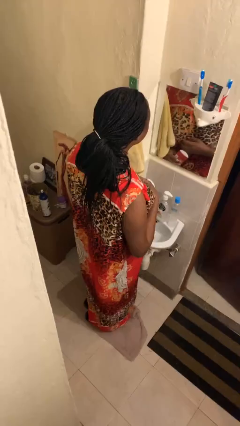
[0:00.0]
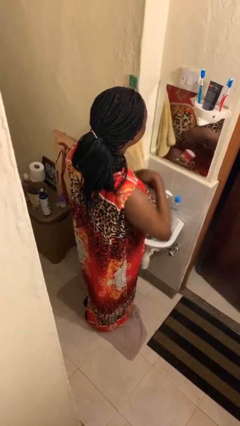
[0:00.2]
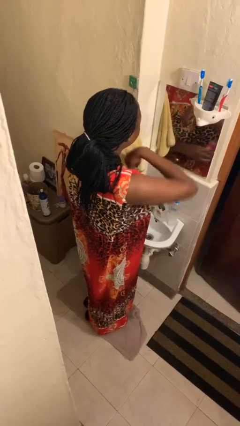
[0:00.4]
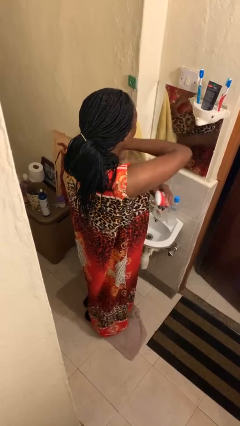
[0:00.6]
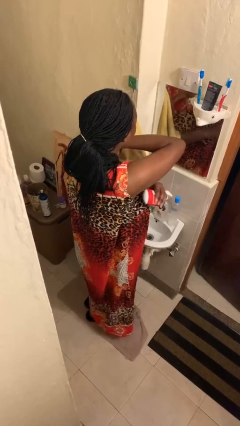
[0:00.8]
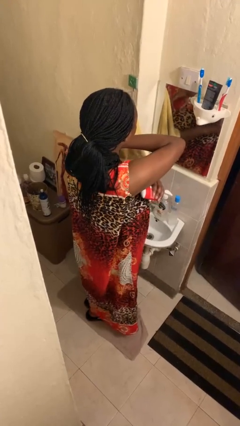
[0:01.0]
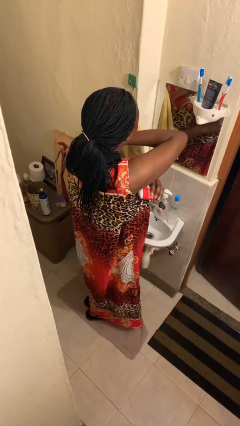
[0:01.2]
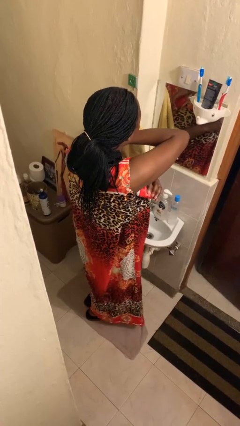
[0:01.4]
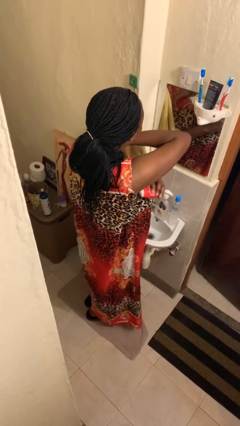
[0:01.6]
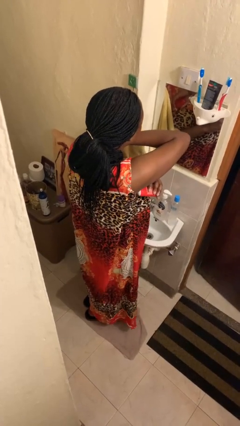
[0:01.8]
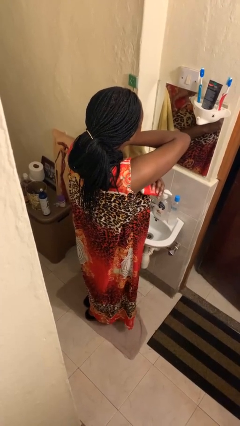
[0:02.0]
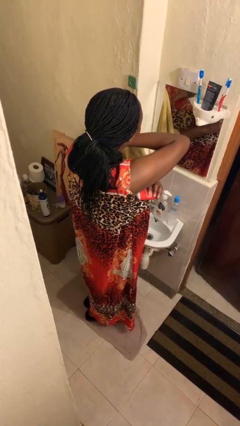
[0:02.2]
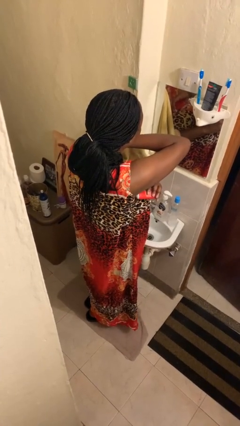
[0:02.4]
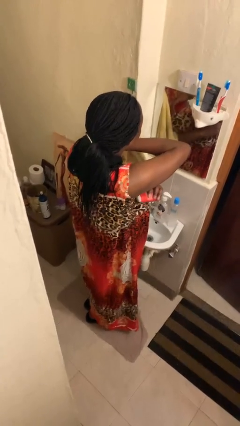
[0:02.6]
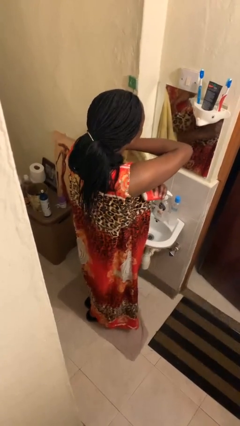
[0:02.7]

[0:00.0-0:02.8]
person applies deodorant

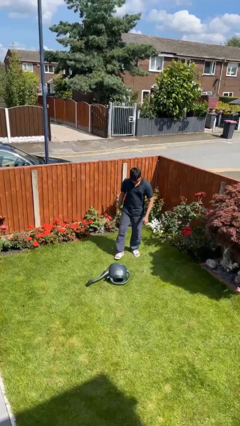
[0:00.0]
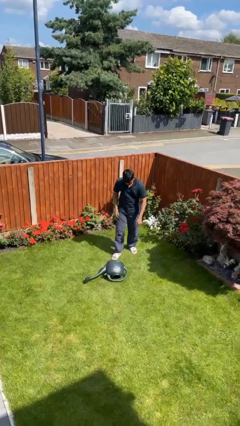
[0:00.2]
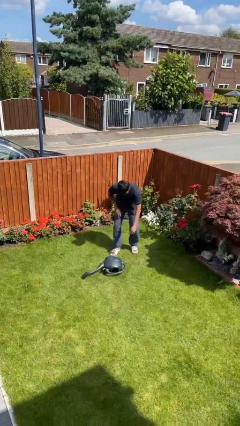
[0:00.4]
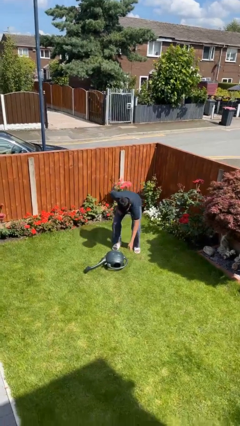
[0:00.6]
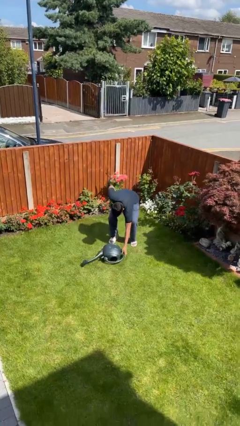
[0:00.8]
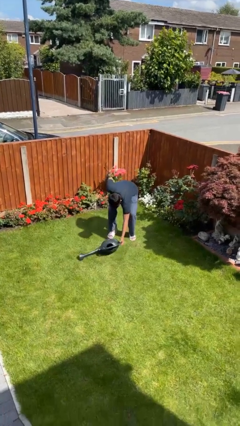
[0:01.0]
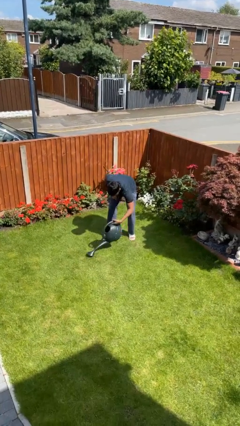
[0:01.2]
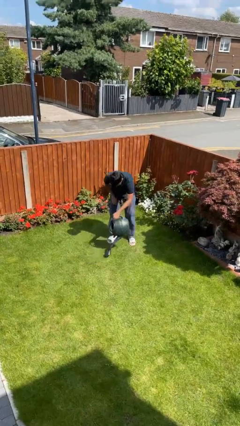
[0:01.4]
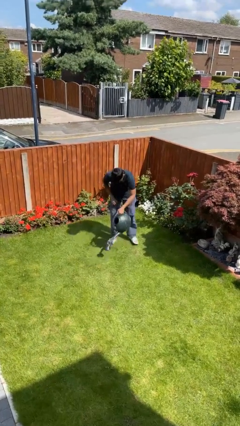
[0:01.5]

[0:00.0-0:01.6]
person picks up object from floor

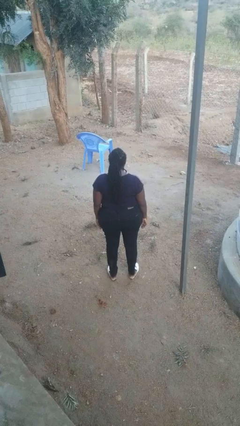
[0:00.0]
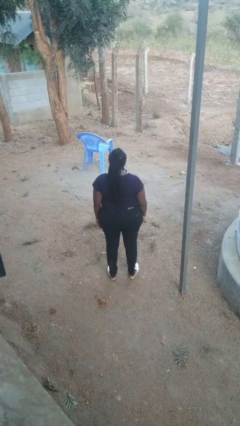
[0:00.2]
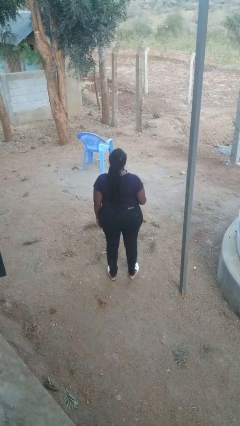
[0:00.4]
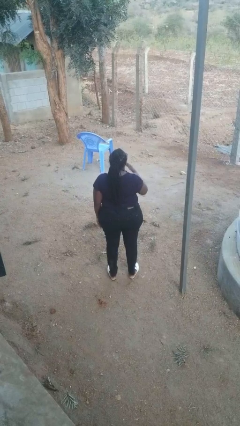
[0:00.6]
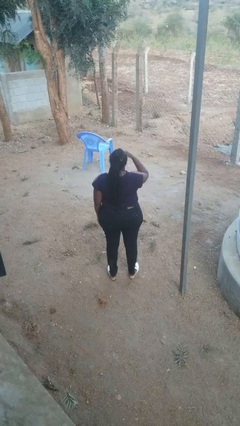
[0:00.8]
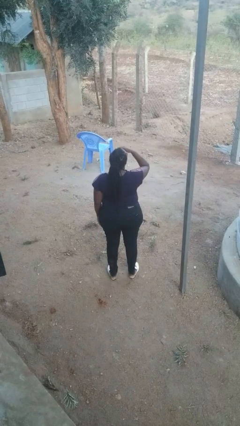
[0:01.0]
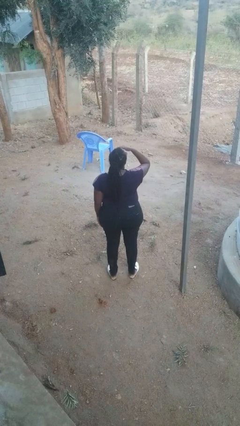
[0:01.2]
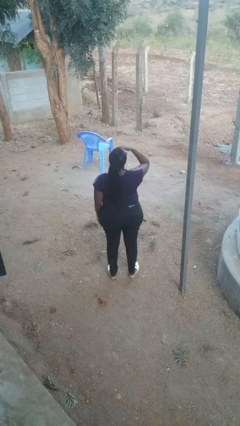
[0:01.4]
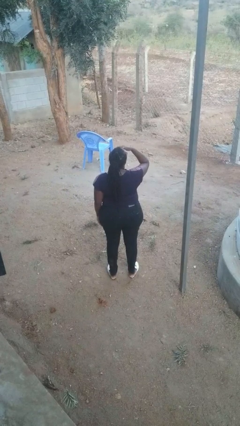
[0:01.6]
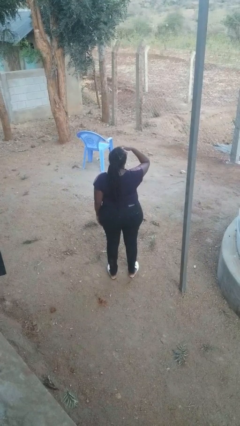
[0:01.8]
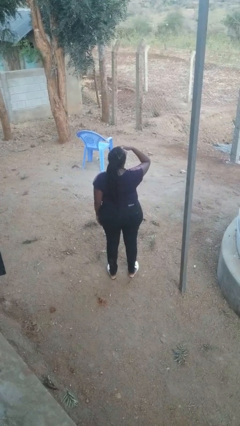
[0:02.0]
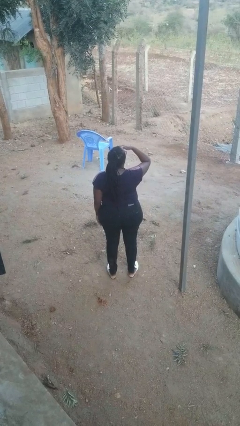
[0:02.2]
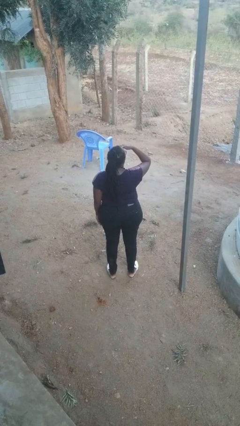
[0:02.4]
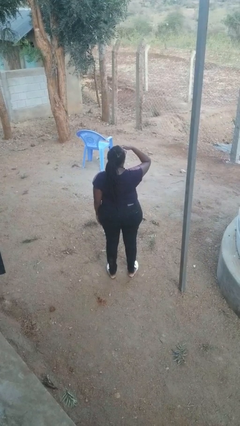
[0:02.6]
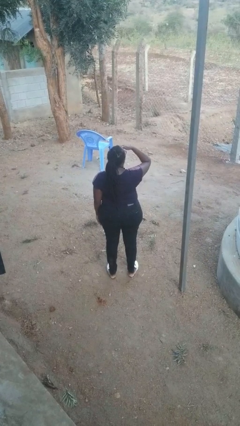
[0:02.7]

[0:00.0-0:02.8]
person shades eyes

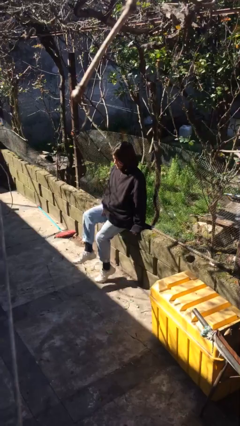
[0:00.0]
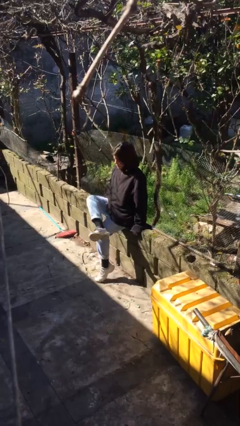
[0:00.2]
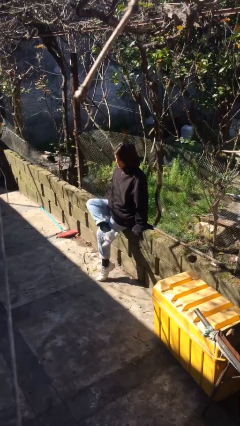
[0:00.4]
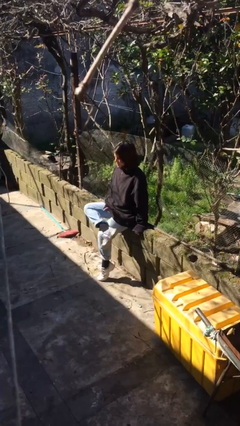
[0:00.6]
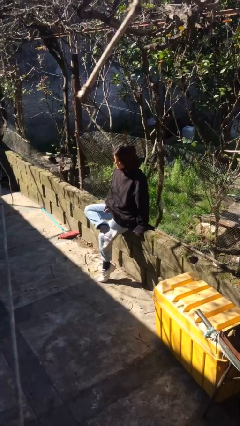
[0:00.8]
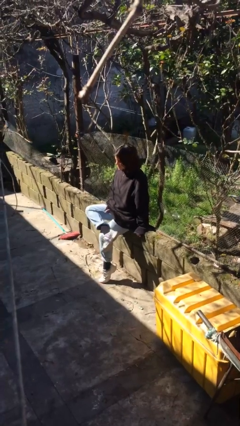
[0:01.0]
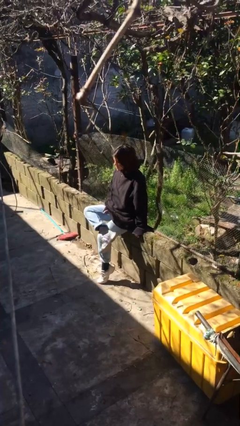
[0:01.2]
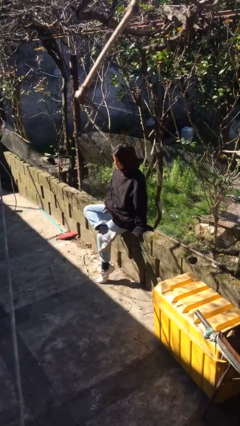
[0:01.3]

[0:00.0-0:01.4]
person crosses legs

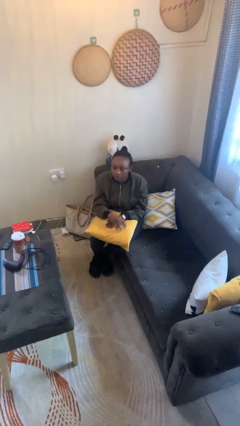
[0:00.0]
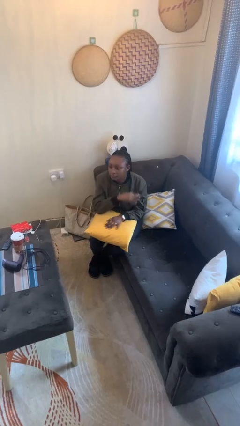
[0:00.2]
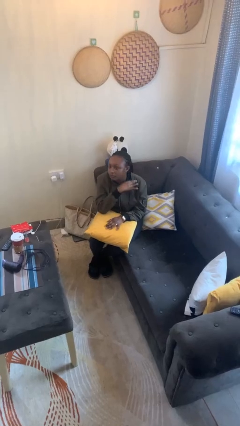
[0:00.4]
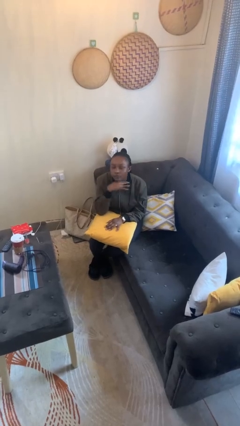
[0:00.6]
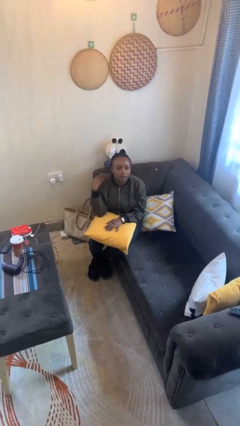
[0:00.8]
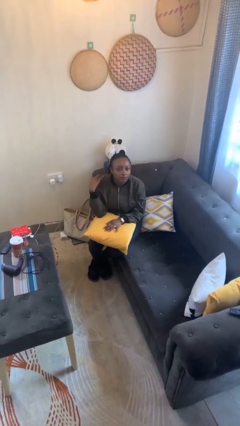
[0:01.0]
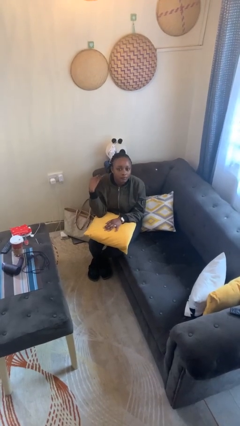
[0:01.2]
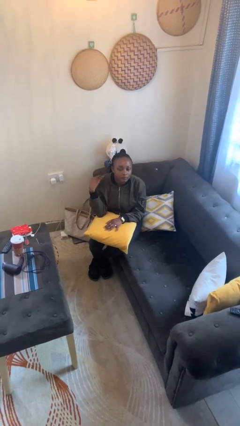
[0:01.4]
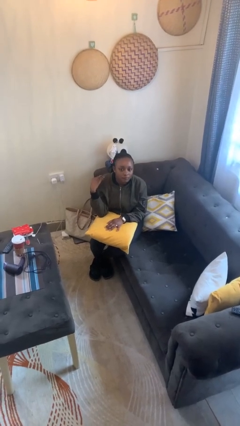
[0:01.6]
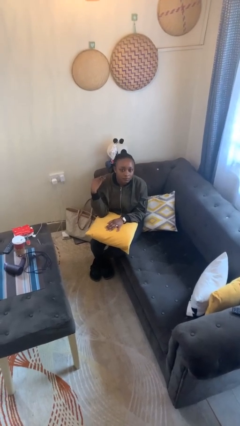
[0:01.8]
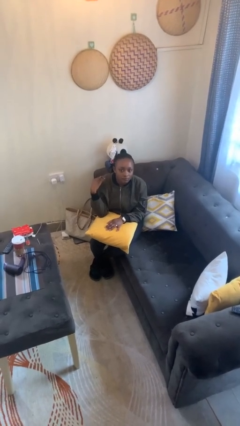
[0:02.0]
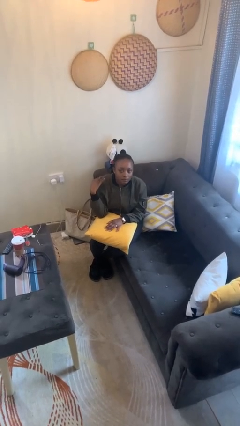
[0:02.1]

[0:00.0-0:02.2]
person gestures cut

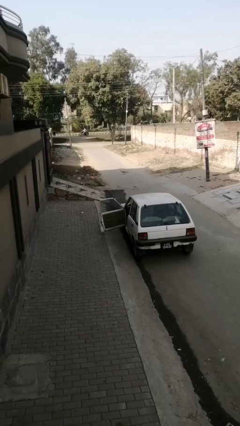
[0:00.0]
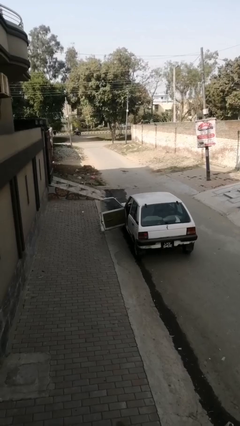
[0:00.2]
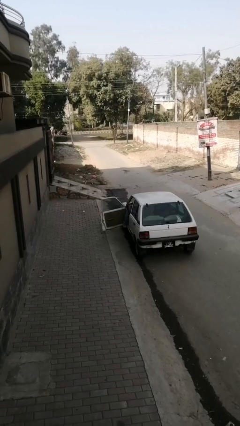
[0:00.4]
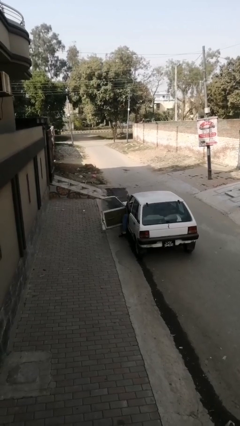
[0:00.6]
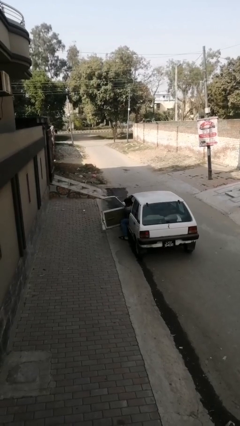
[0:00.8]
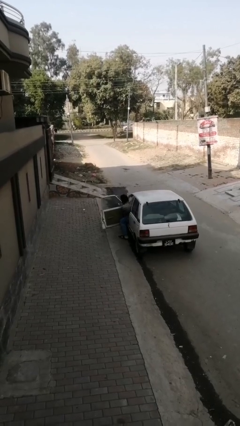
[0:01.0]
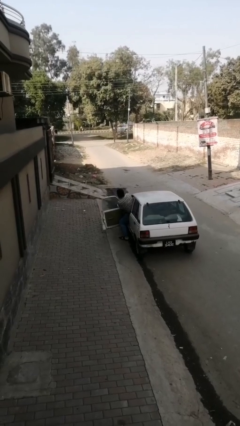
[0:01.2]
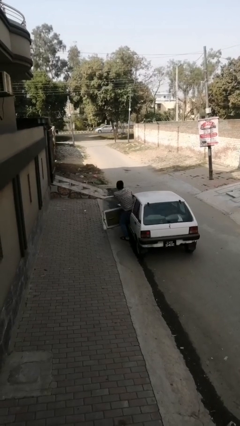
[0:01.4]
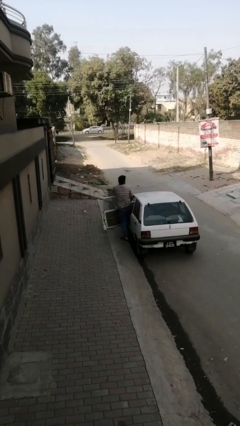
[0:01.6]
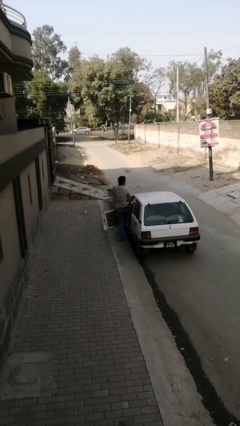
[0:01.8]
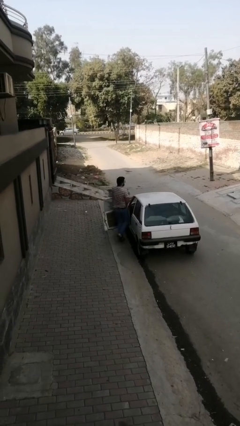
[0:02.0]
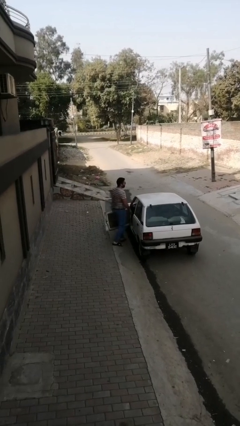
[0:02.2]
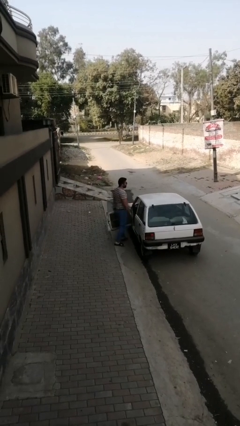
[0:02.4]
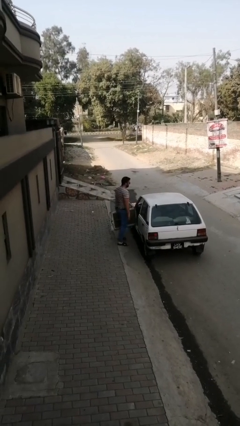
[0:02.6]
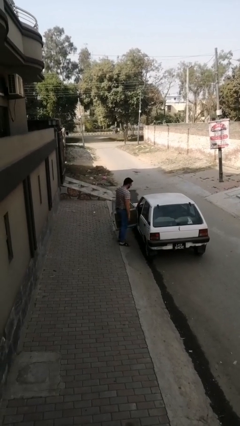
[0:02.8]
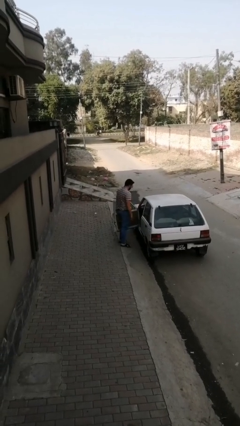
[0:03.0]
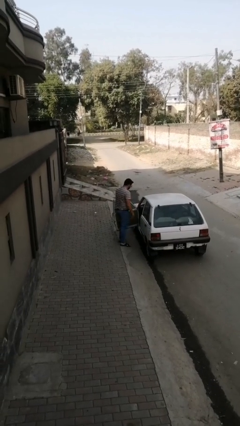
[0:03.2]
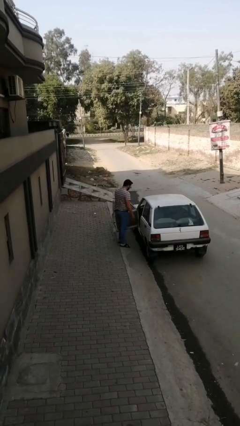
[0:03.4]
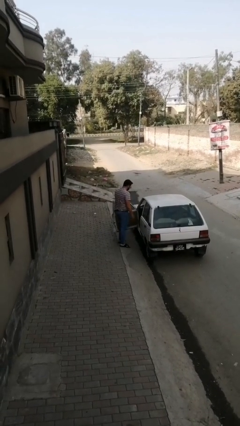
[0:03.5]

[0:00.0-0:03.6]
person exits car

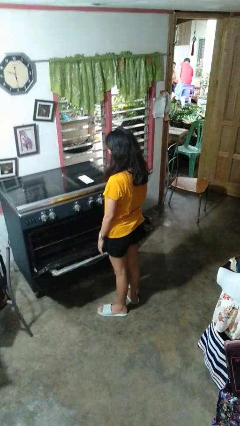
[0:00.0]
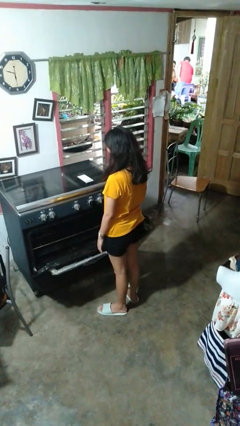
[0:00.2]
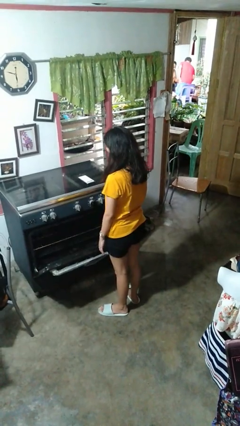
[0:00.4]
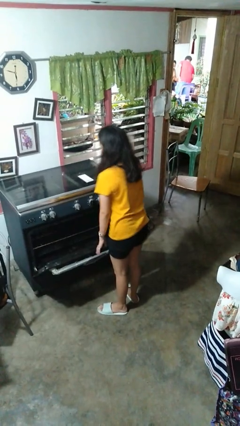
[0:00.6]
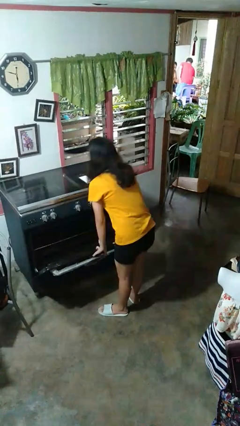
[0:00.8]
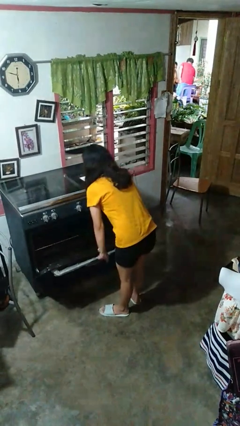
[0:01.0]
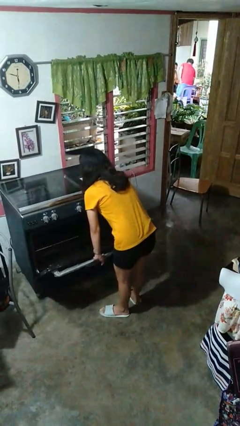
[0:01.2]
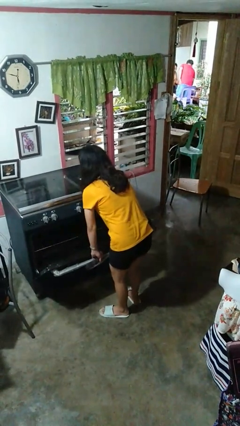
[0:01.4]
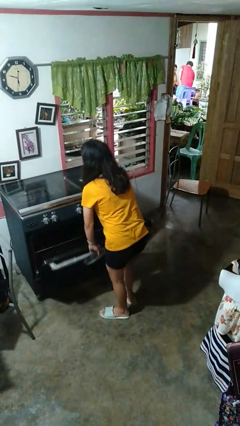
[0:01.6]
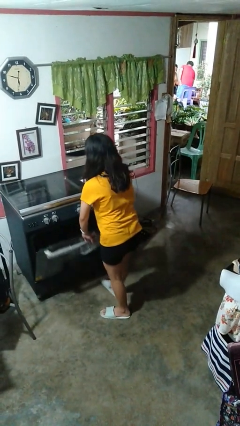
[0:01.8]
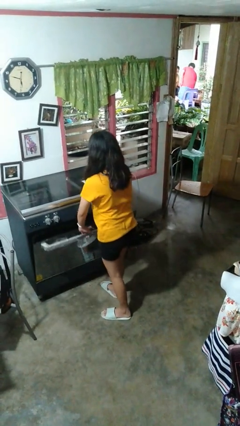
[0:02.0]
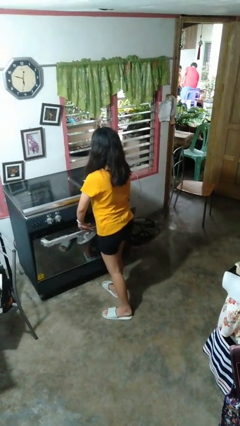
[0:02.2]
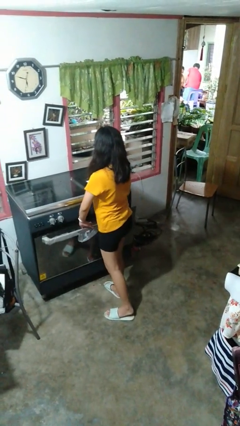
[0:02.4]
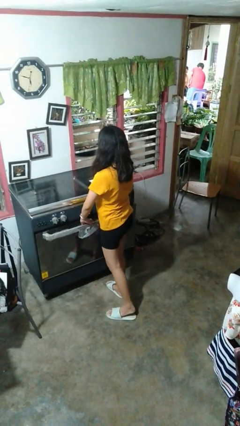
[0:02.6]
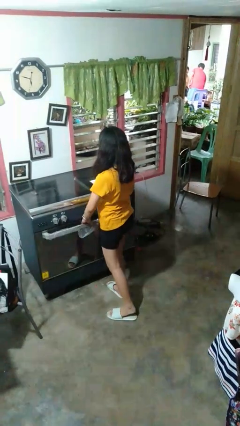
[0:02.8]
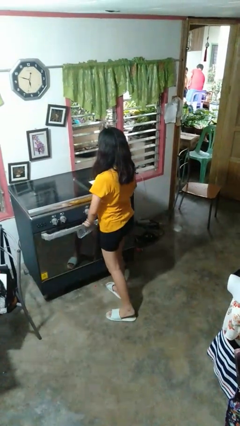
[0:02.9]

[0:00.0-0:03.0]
person closes oven door
